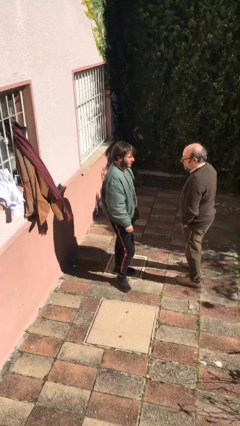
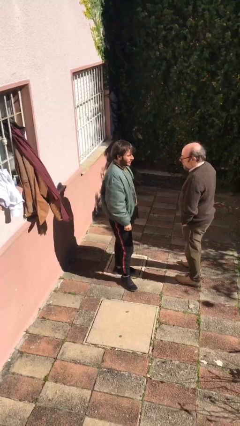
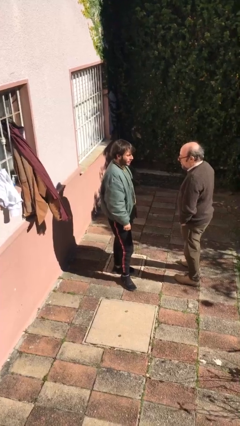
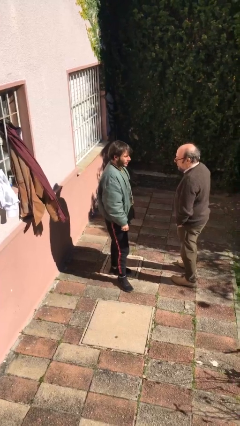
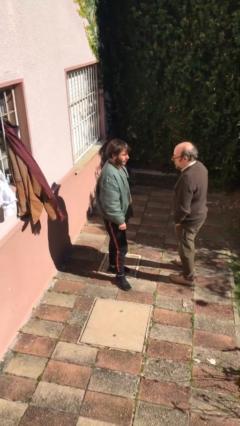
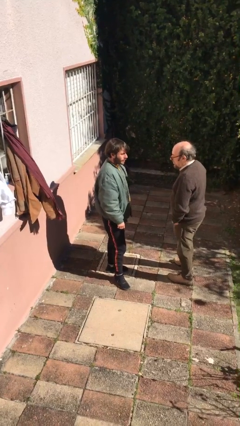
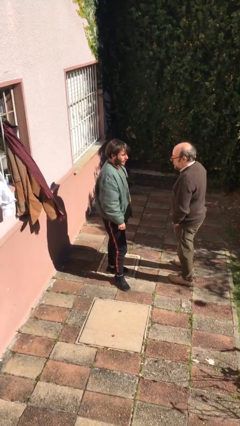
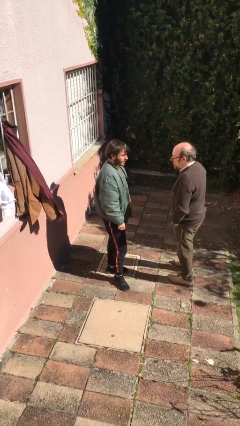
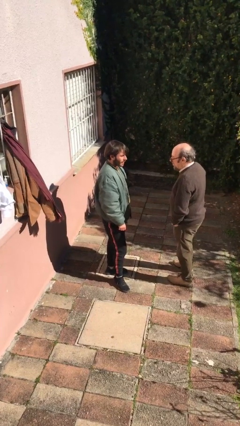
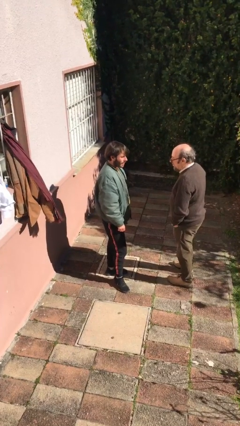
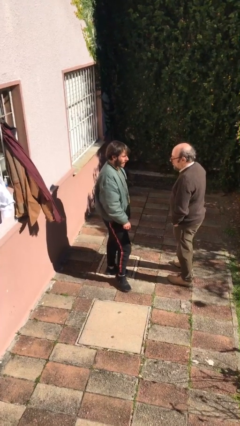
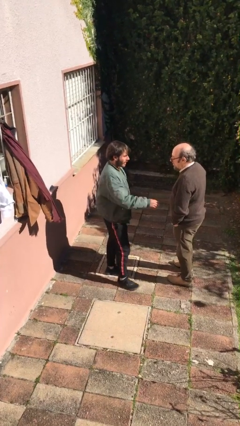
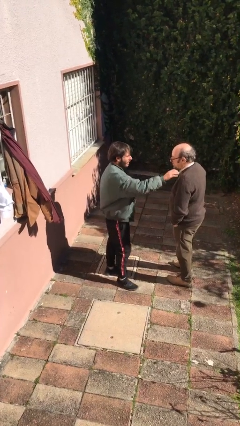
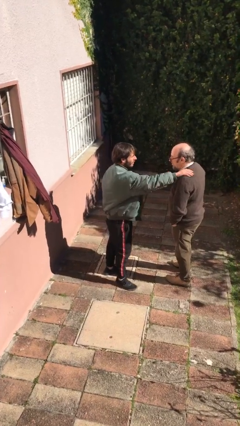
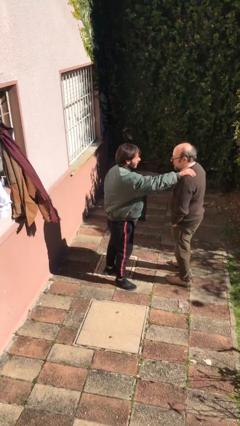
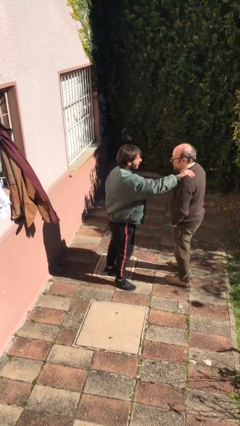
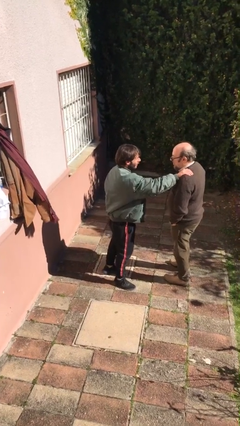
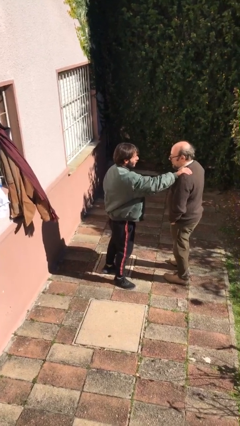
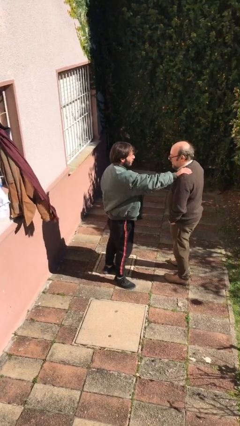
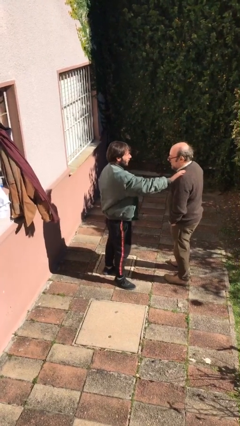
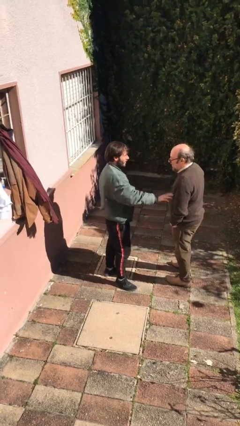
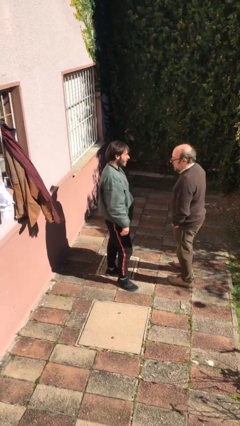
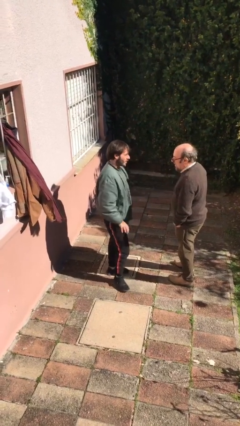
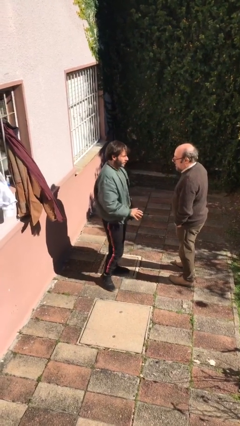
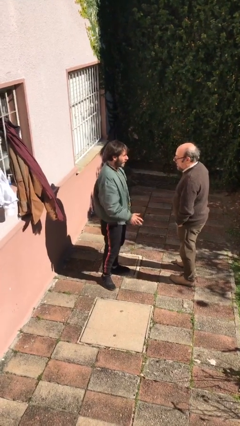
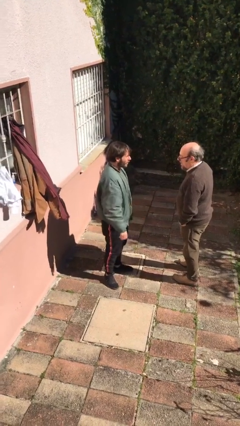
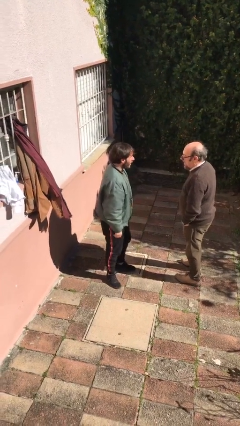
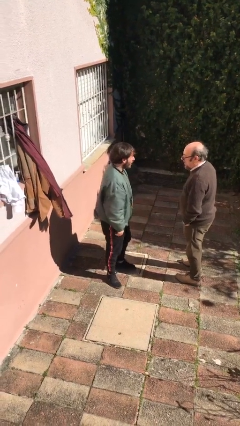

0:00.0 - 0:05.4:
person pounds shoulders of person

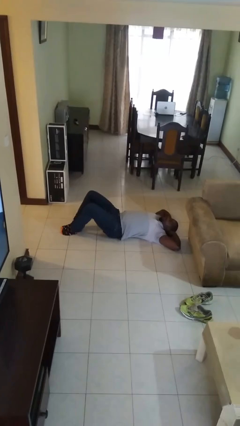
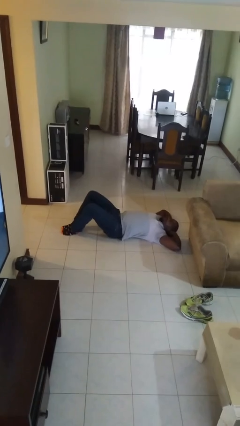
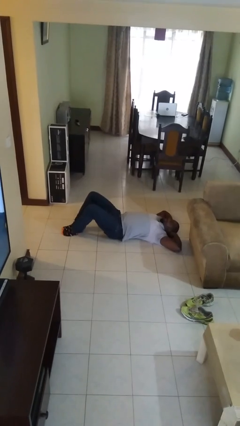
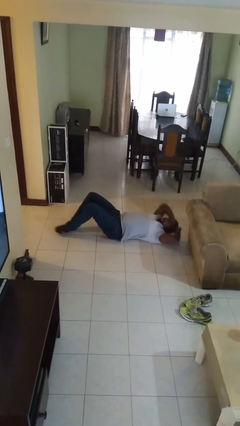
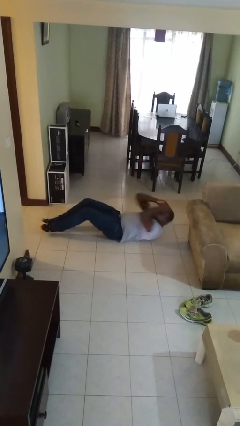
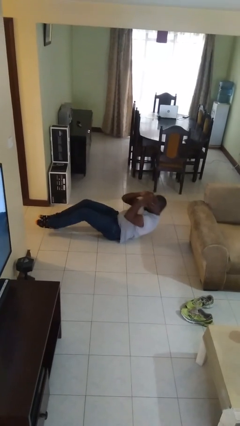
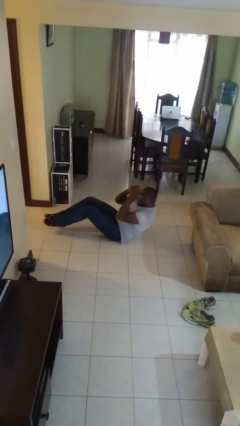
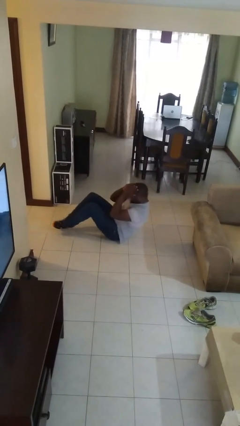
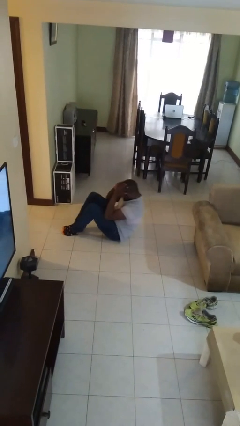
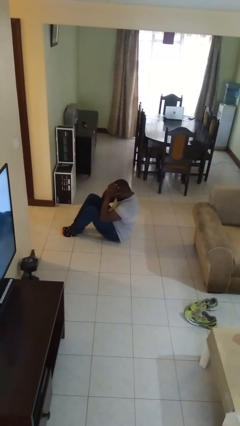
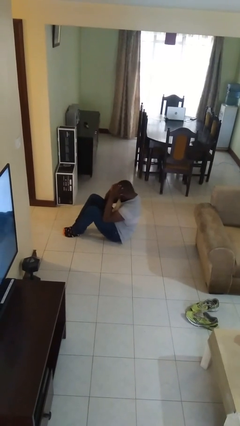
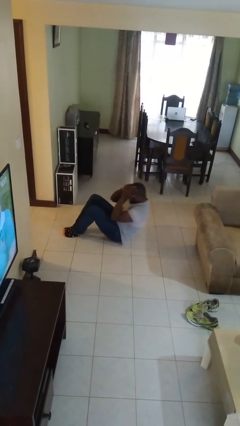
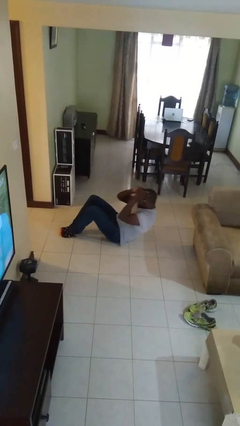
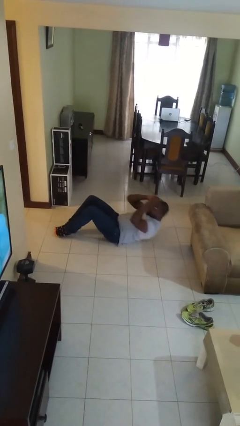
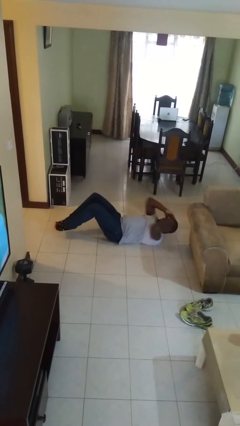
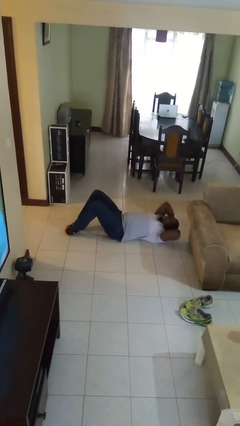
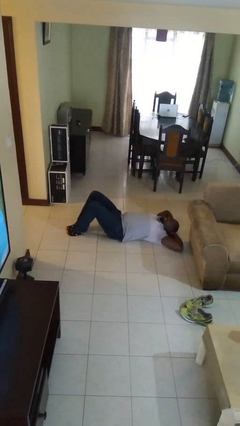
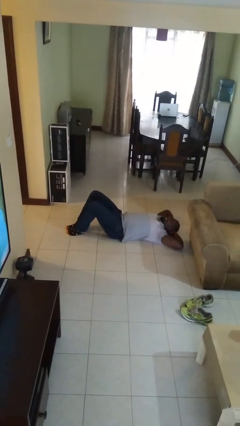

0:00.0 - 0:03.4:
person exercises with situp

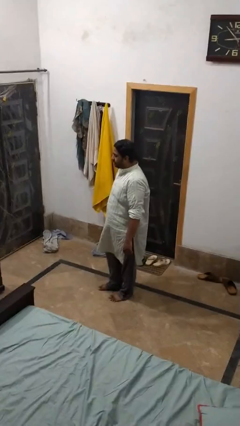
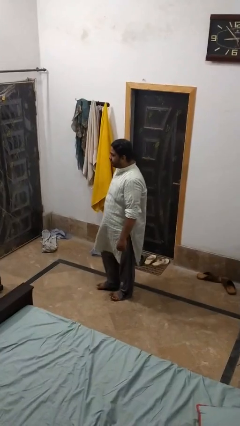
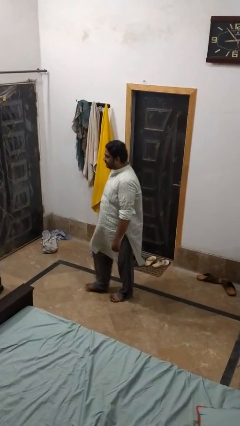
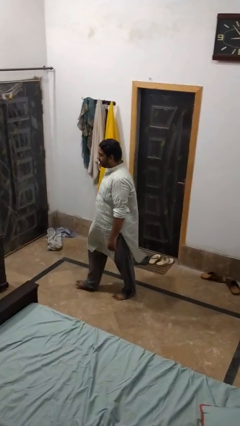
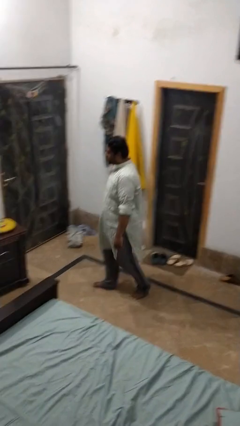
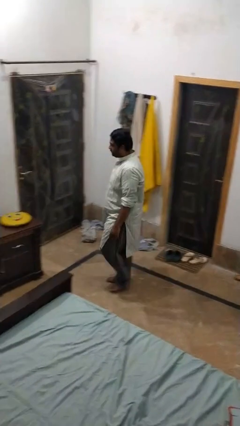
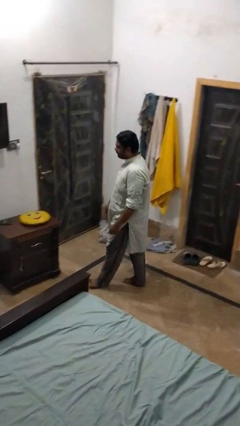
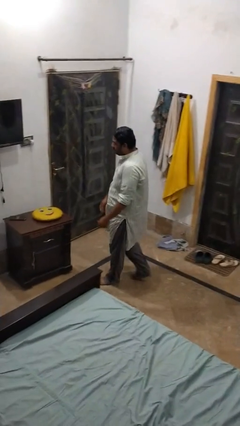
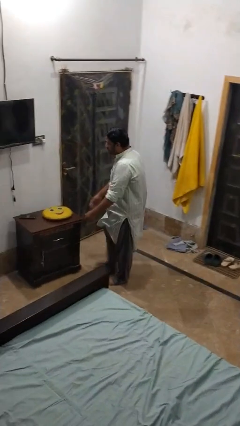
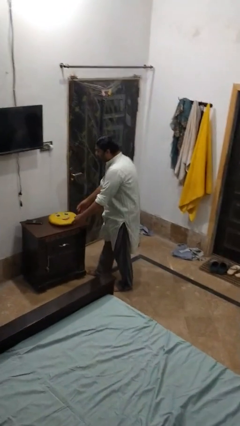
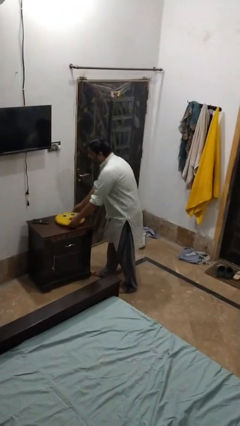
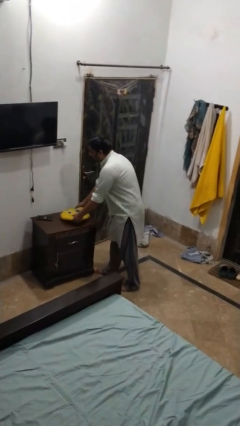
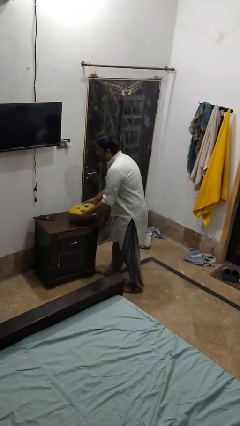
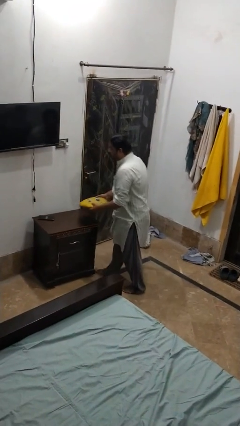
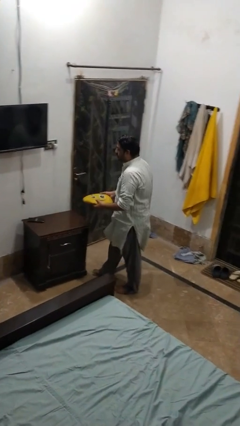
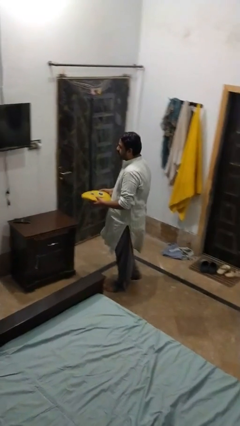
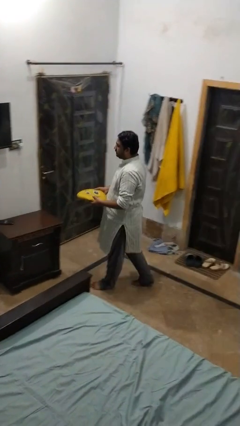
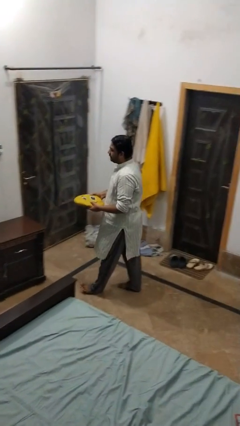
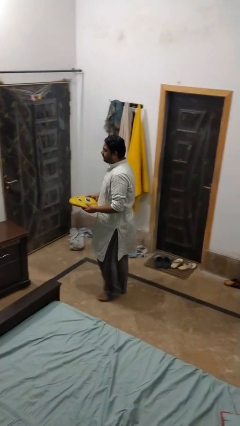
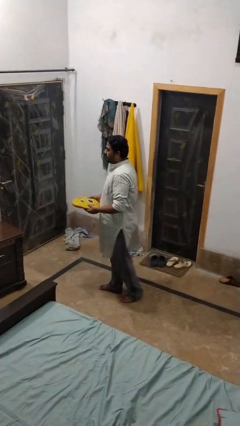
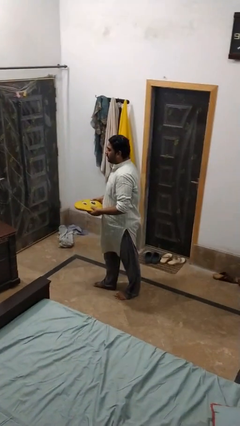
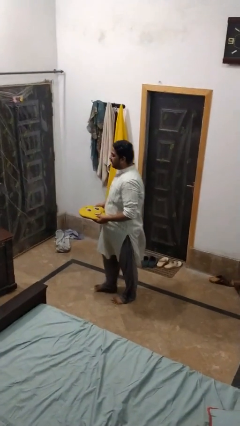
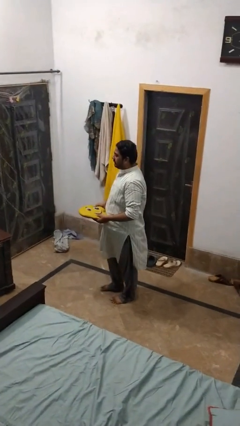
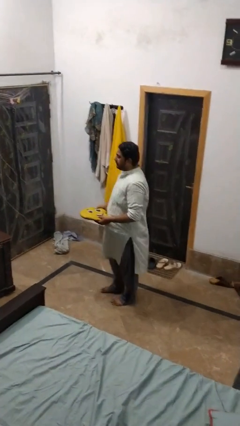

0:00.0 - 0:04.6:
person picks up object from table

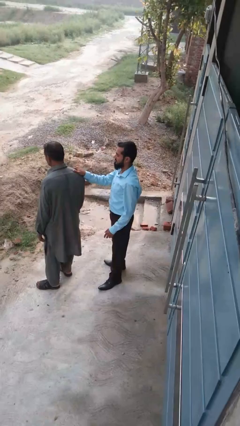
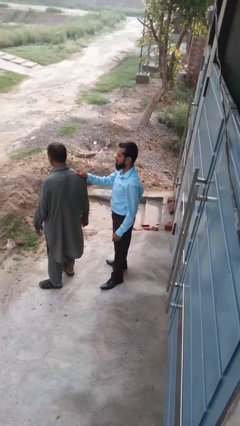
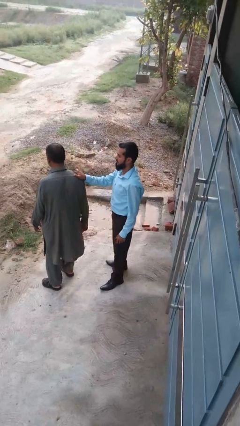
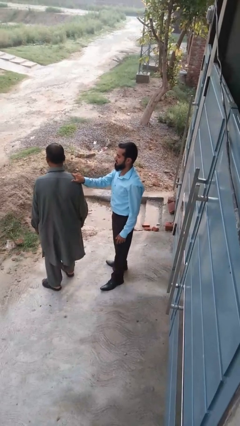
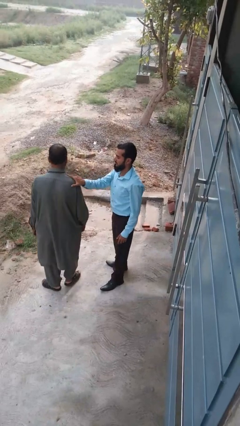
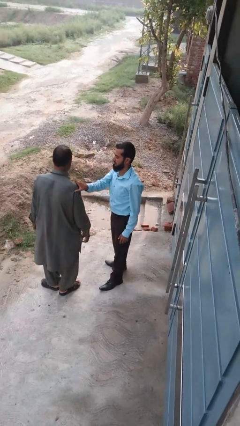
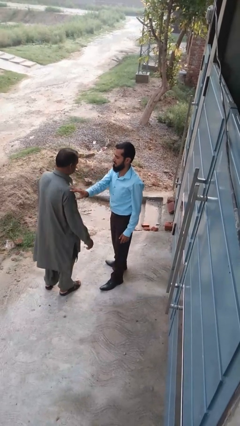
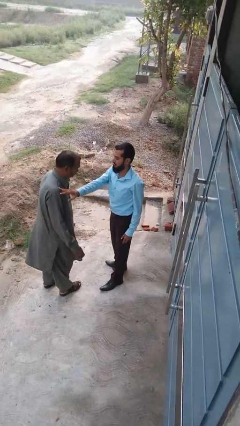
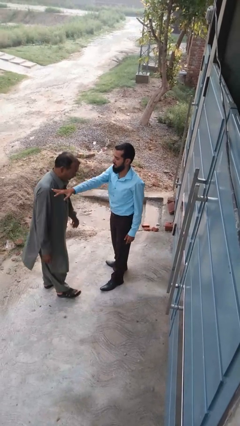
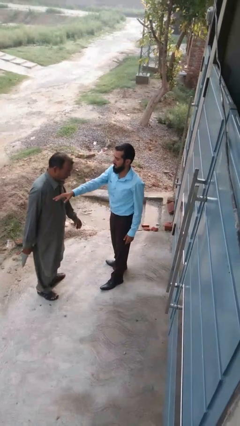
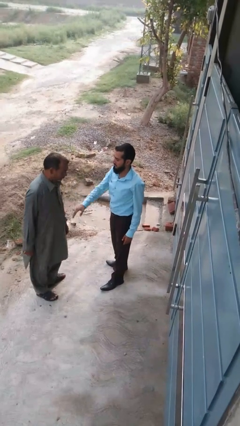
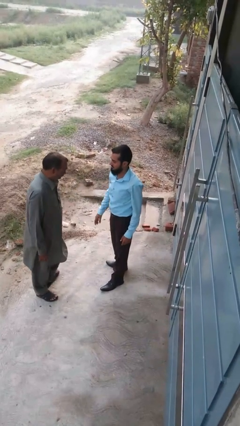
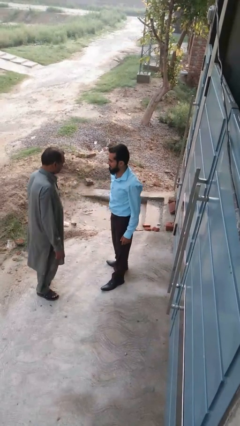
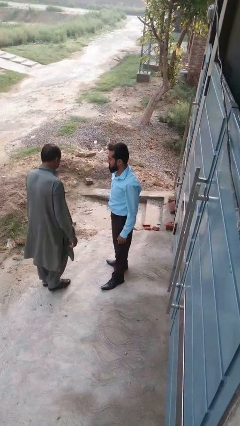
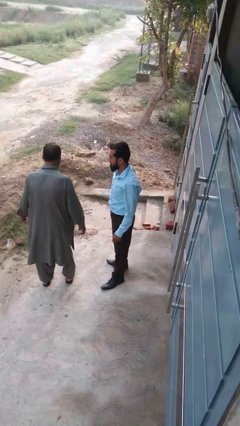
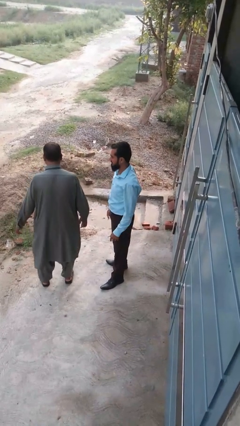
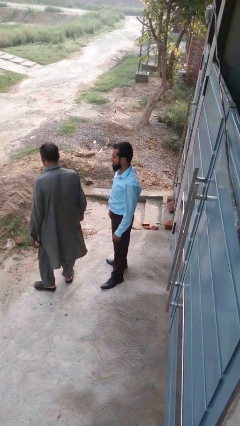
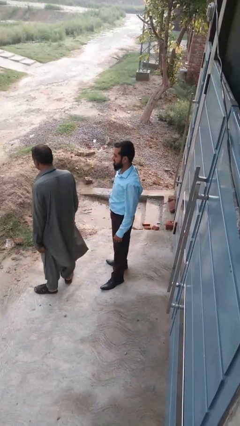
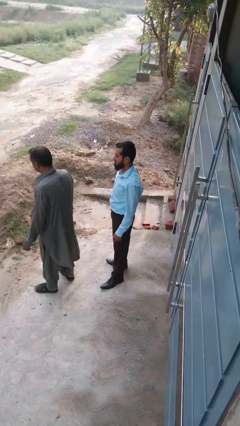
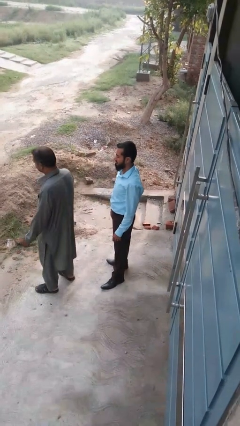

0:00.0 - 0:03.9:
person spins person around

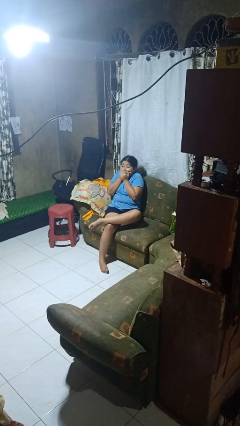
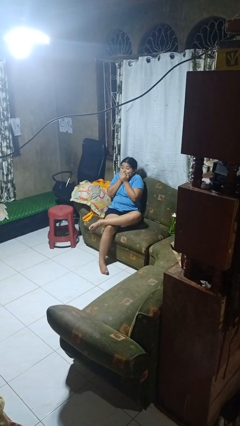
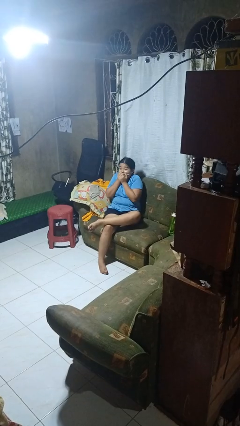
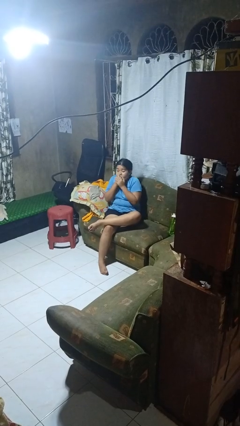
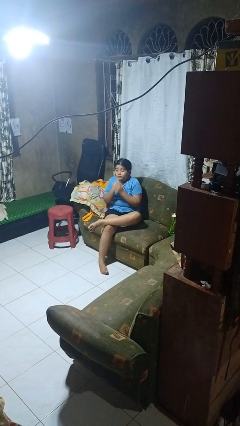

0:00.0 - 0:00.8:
person covers face with hands
